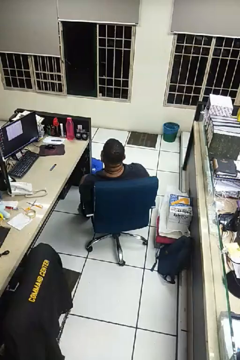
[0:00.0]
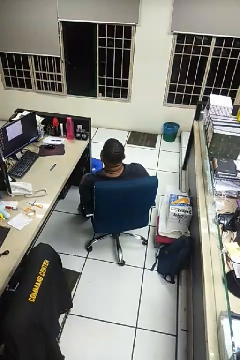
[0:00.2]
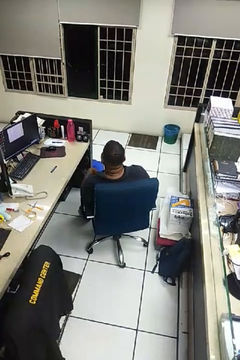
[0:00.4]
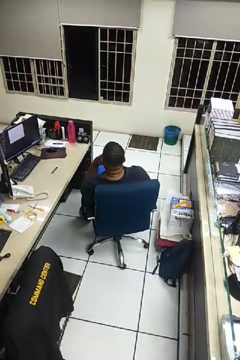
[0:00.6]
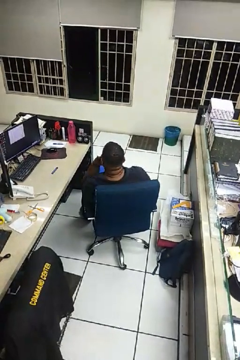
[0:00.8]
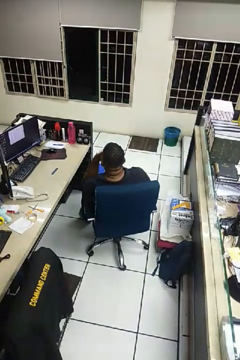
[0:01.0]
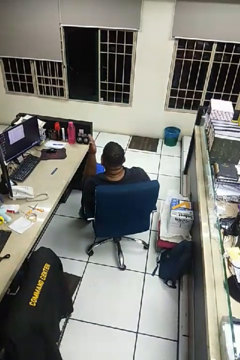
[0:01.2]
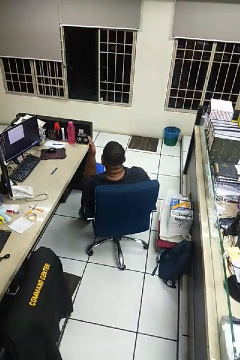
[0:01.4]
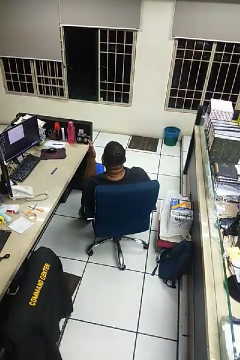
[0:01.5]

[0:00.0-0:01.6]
person gestures blow kiss

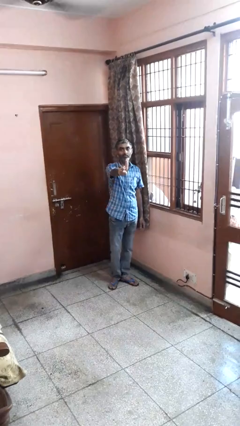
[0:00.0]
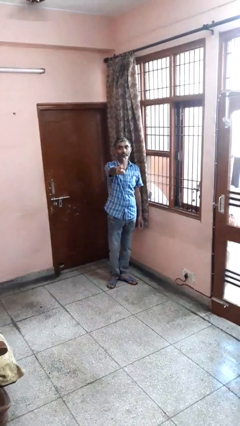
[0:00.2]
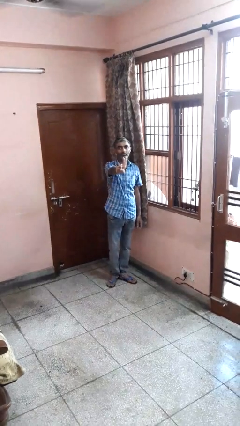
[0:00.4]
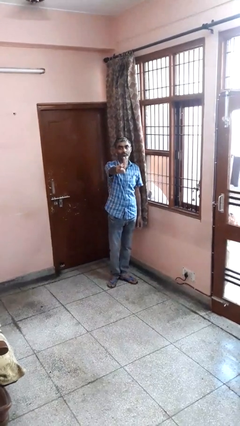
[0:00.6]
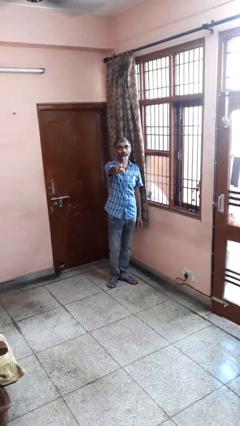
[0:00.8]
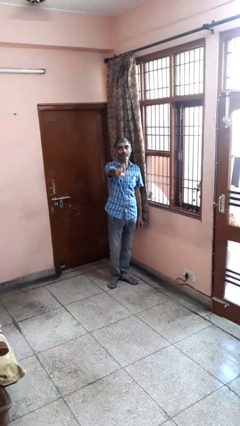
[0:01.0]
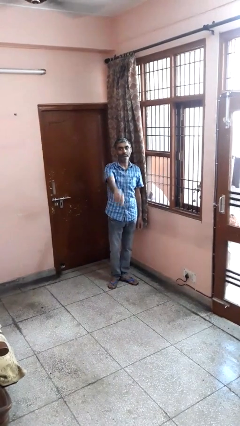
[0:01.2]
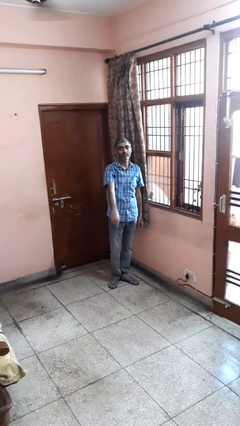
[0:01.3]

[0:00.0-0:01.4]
person gestures number one

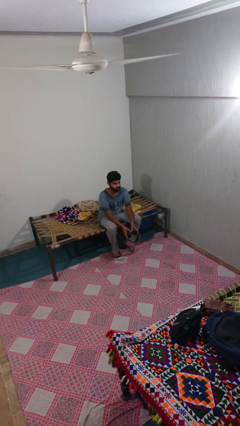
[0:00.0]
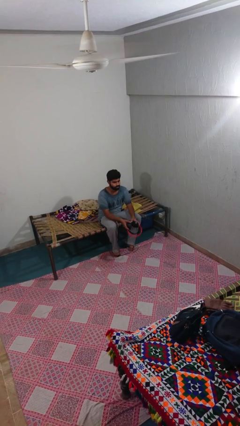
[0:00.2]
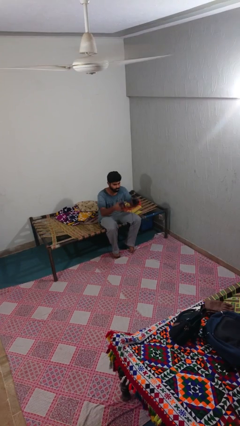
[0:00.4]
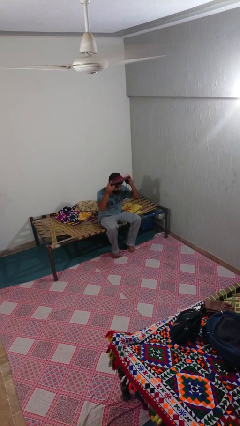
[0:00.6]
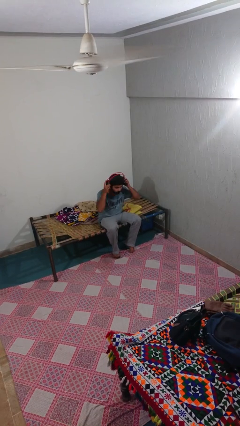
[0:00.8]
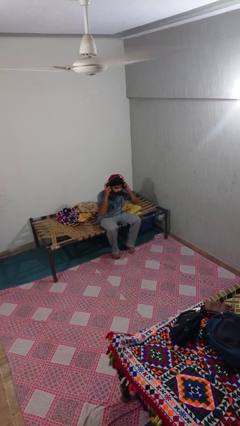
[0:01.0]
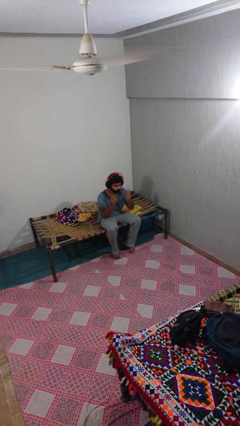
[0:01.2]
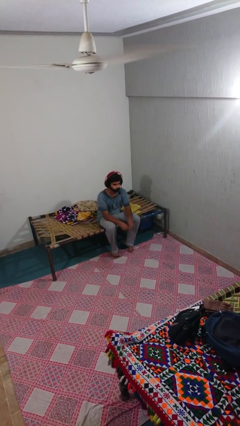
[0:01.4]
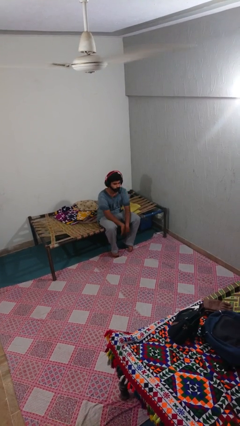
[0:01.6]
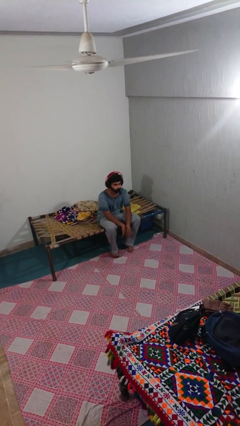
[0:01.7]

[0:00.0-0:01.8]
person puts on headphones

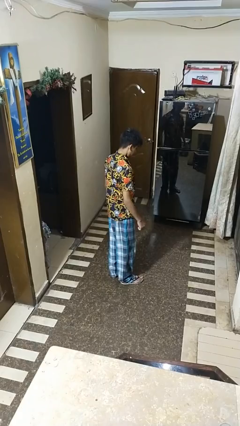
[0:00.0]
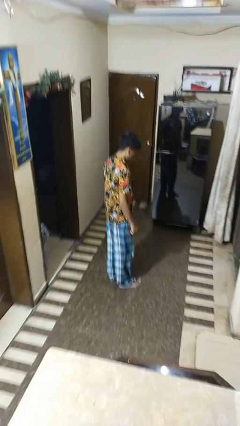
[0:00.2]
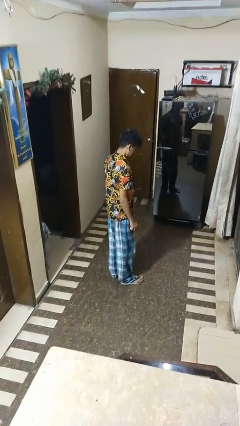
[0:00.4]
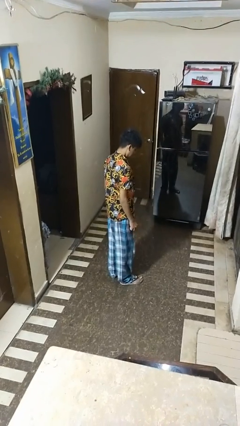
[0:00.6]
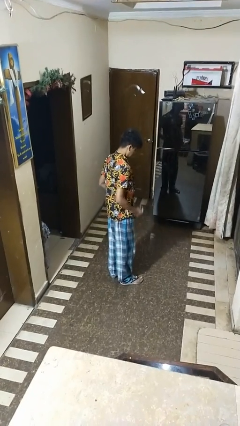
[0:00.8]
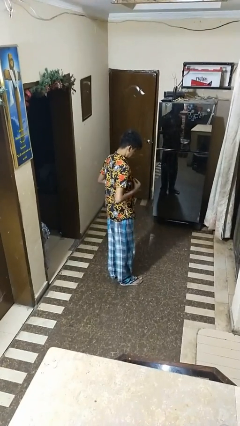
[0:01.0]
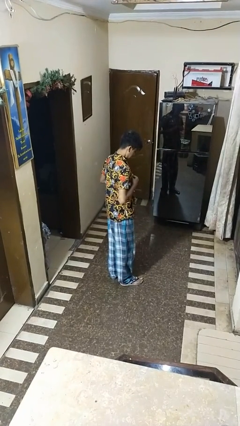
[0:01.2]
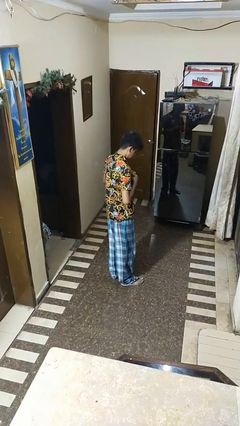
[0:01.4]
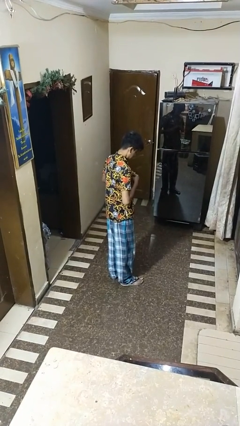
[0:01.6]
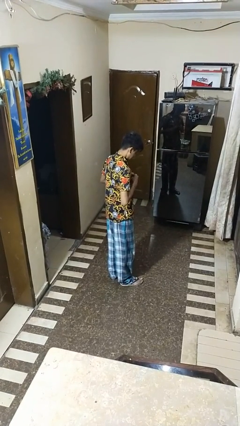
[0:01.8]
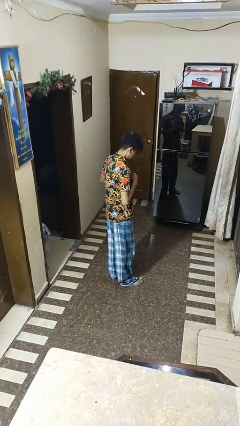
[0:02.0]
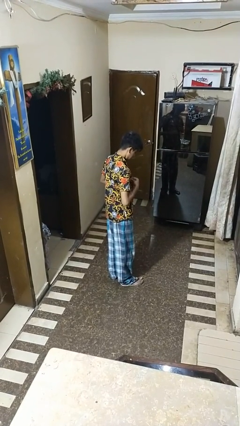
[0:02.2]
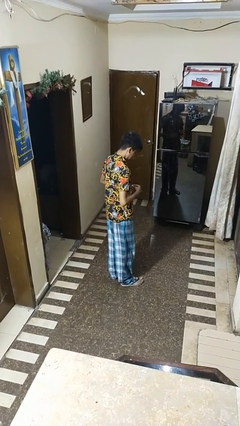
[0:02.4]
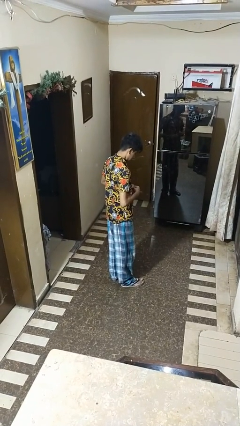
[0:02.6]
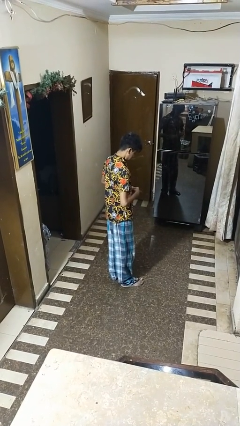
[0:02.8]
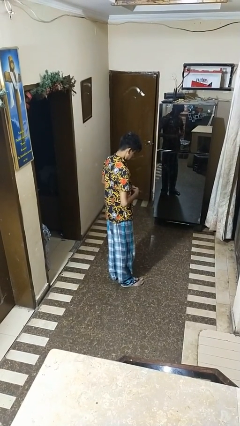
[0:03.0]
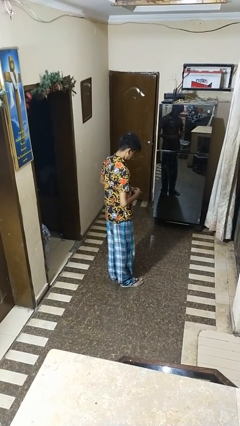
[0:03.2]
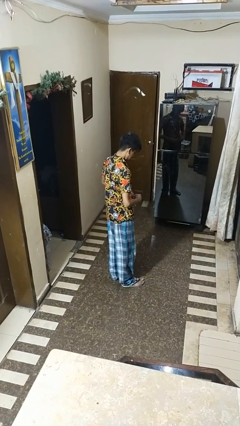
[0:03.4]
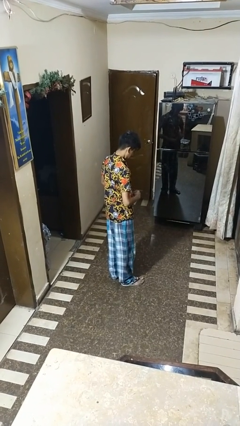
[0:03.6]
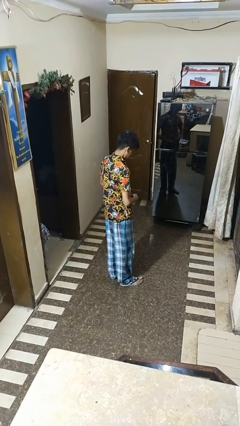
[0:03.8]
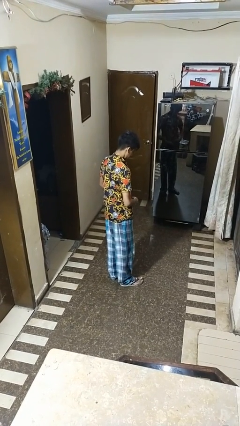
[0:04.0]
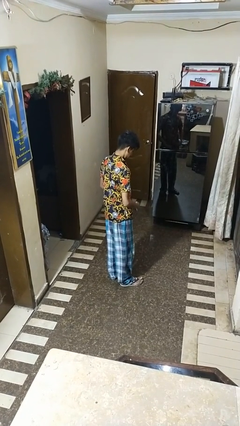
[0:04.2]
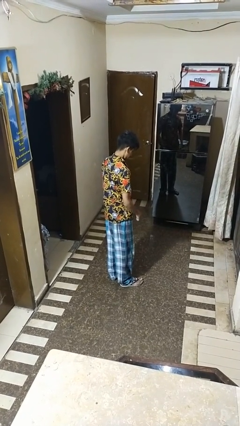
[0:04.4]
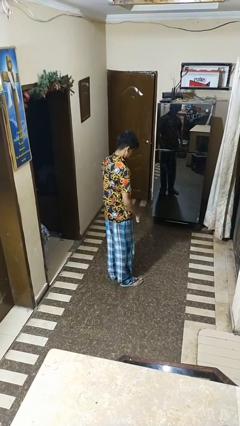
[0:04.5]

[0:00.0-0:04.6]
person buttons shirt

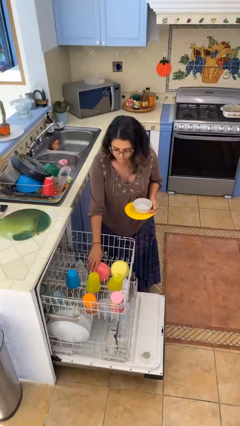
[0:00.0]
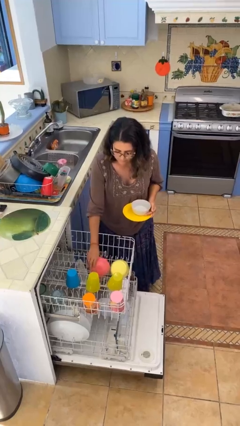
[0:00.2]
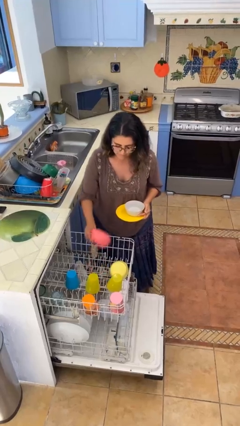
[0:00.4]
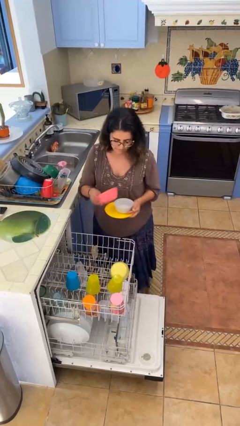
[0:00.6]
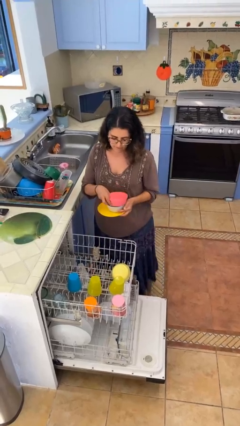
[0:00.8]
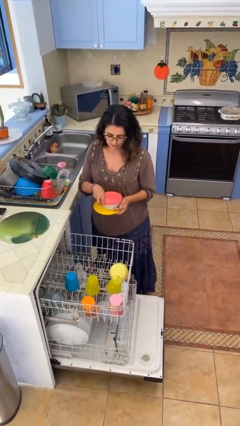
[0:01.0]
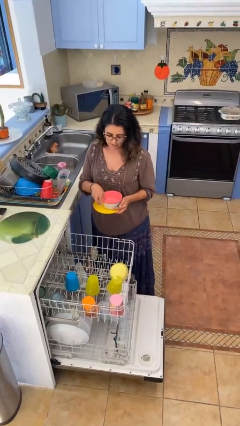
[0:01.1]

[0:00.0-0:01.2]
person unloads dishwasher

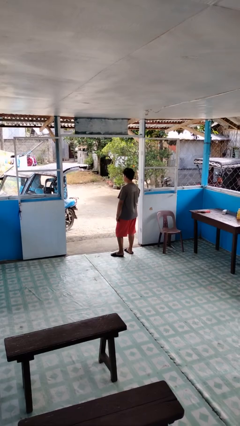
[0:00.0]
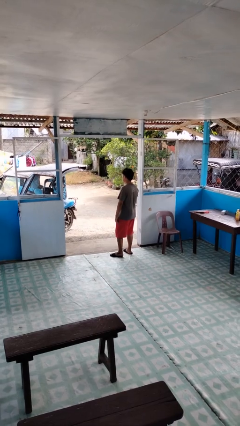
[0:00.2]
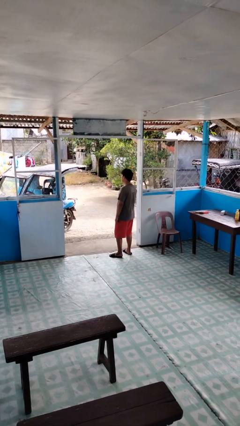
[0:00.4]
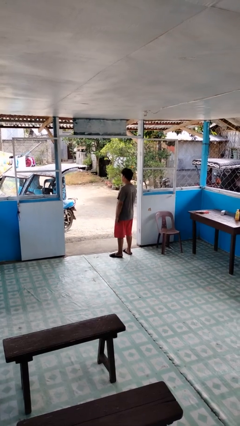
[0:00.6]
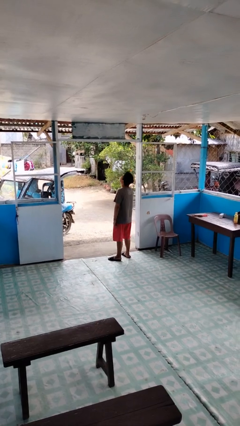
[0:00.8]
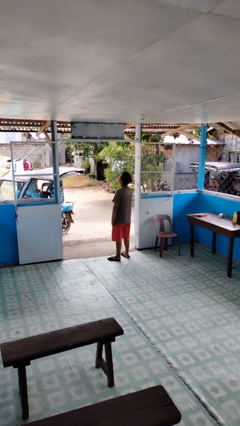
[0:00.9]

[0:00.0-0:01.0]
person nods head

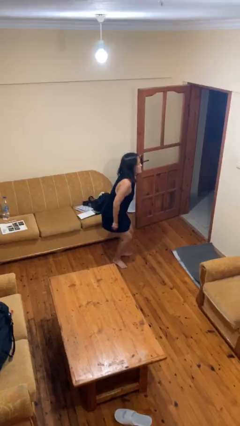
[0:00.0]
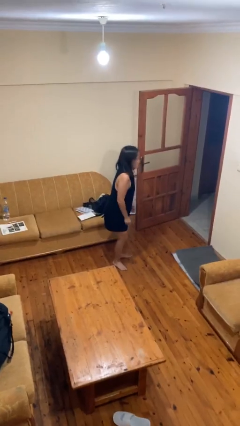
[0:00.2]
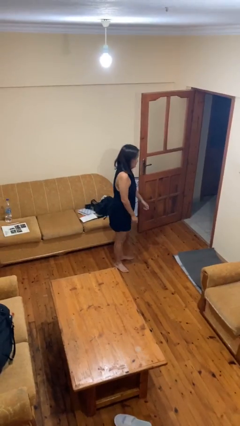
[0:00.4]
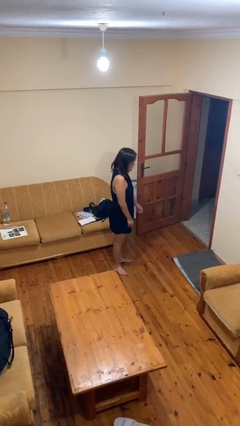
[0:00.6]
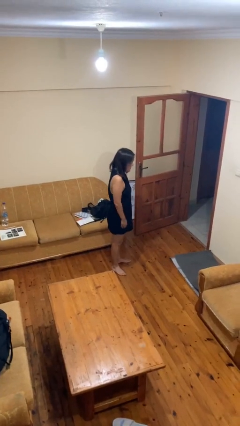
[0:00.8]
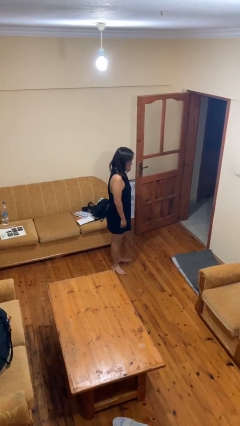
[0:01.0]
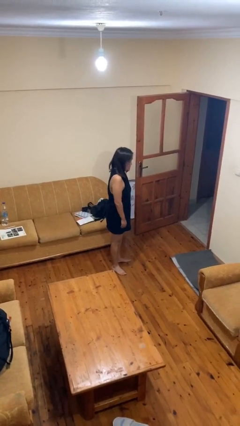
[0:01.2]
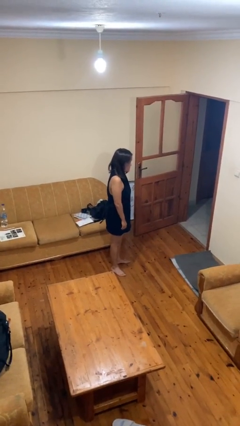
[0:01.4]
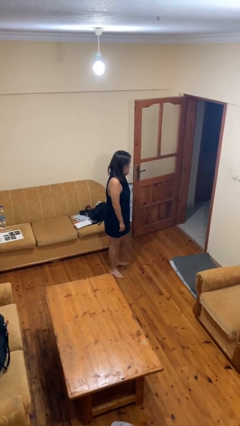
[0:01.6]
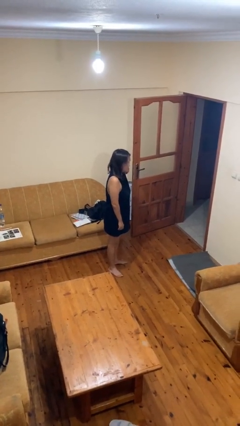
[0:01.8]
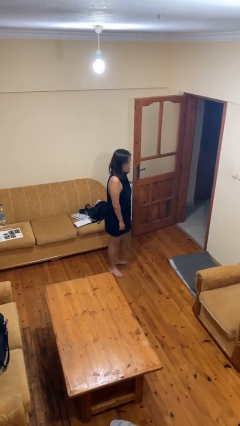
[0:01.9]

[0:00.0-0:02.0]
person stands up

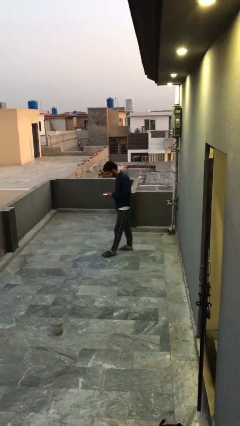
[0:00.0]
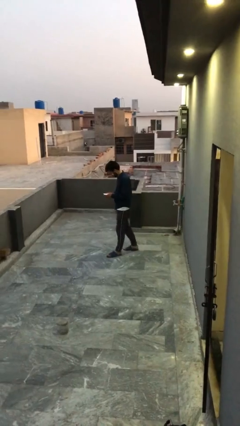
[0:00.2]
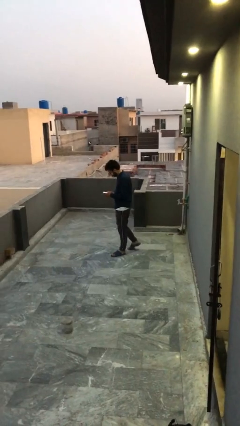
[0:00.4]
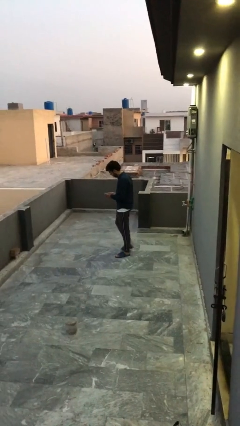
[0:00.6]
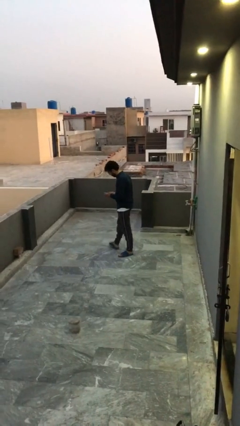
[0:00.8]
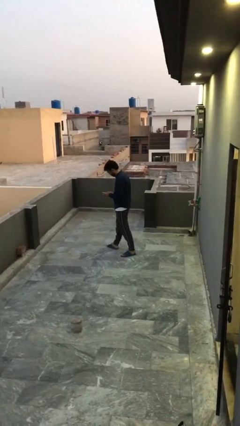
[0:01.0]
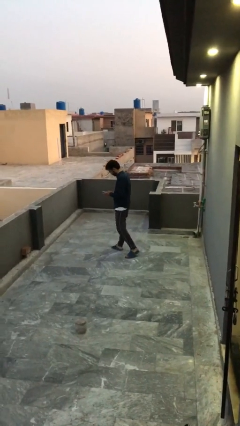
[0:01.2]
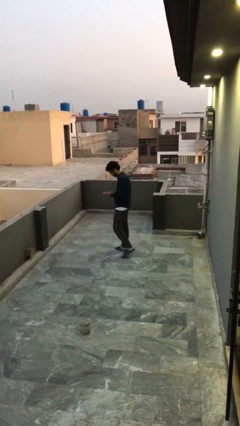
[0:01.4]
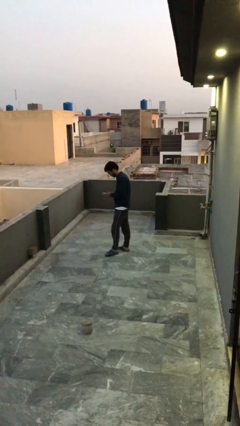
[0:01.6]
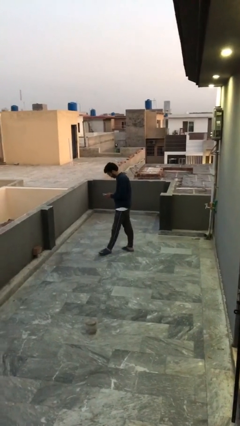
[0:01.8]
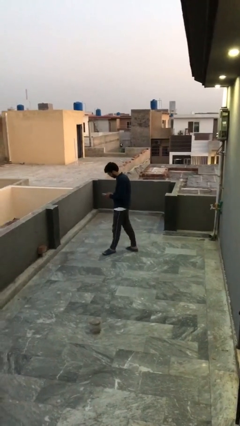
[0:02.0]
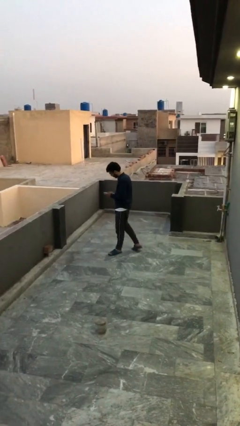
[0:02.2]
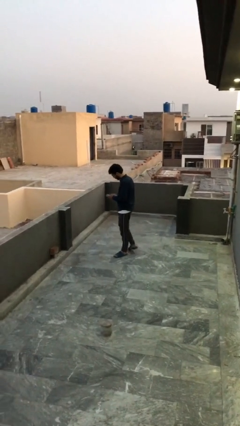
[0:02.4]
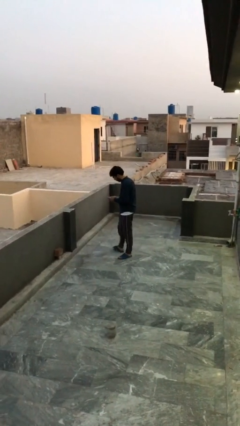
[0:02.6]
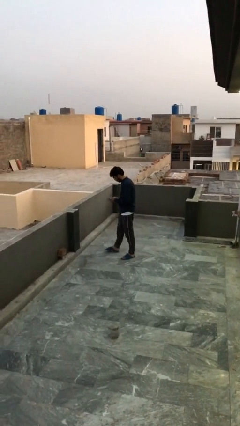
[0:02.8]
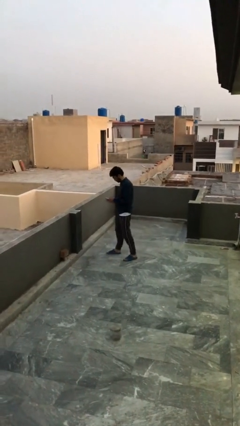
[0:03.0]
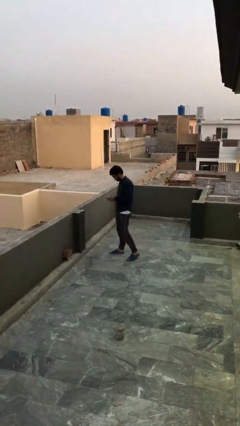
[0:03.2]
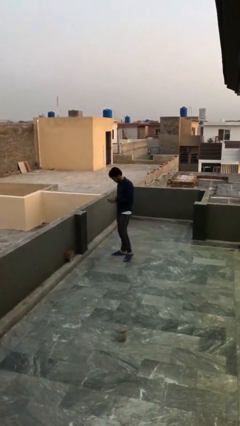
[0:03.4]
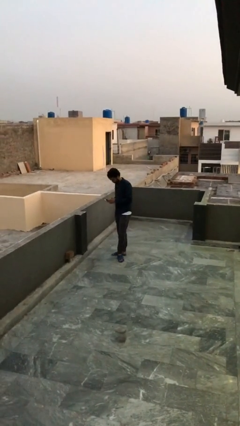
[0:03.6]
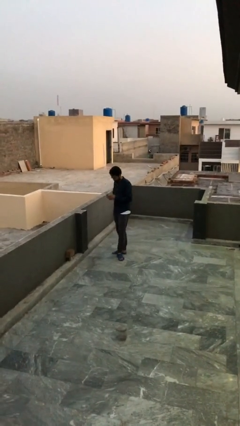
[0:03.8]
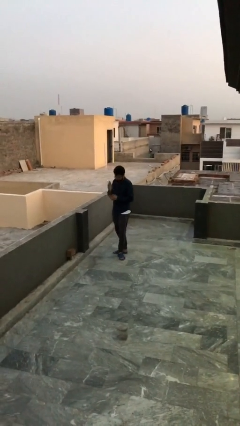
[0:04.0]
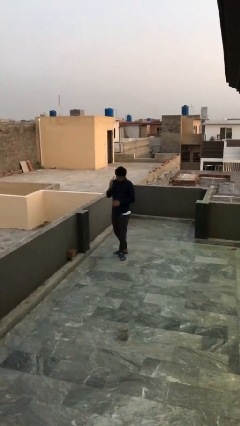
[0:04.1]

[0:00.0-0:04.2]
person texts on phone
